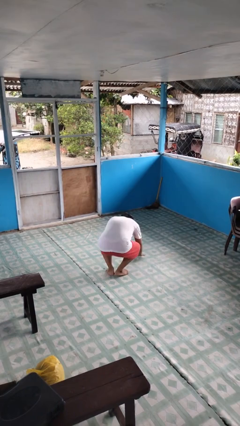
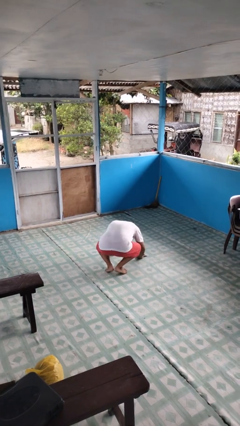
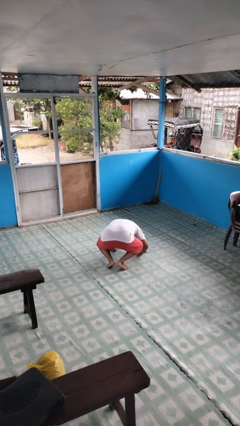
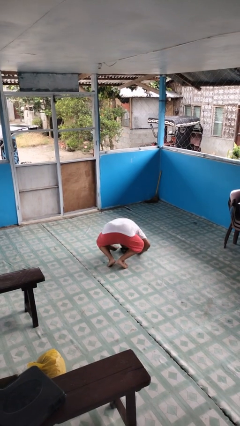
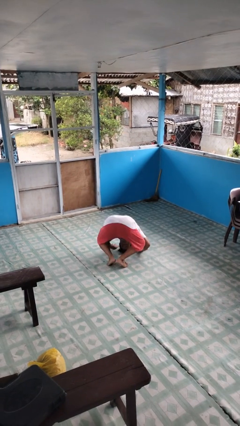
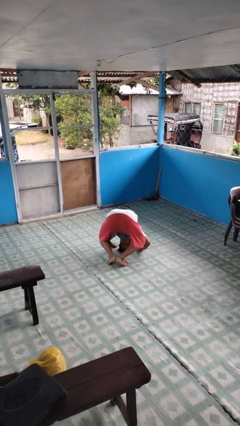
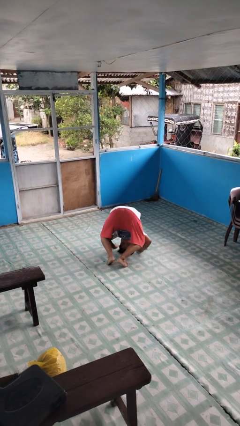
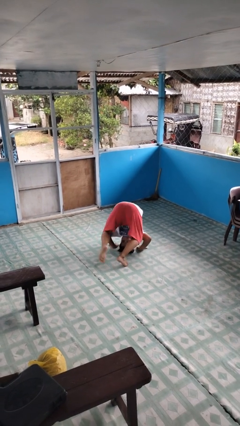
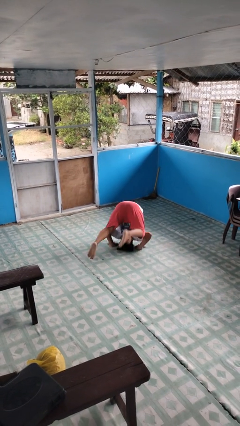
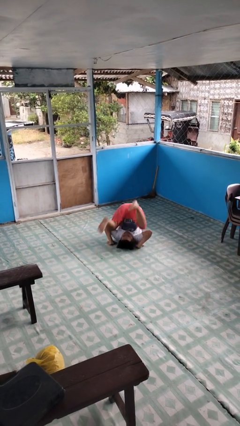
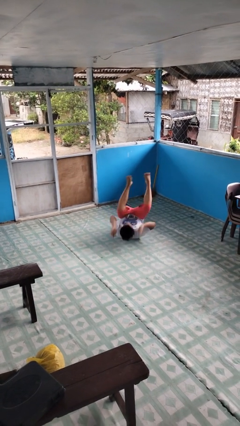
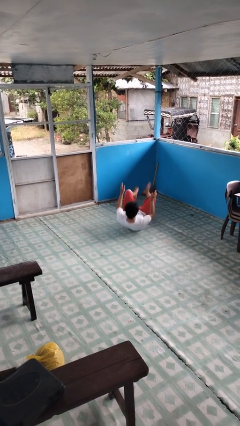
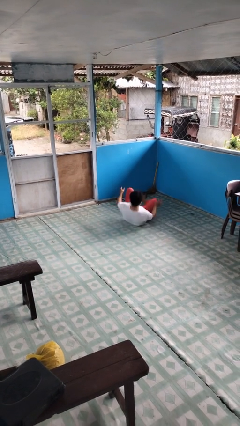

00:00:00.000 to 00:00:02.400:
person somersaults

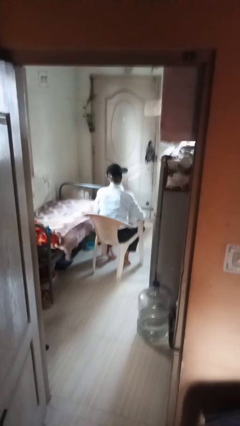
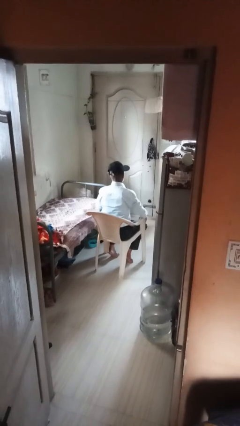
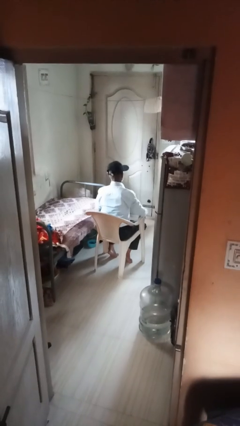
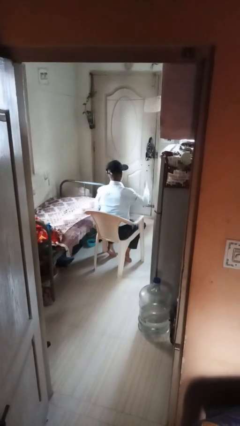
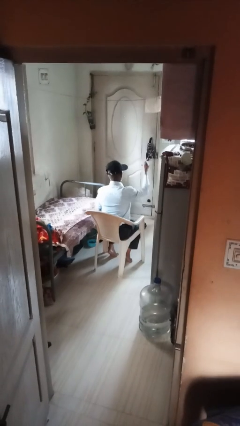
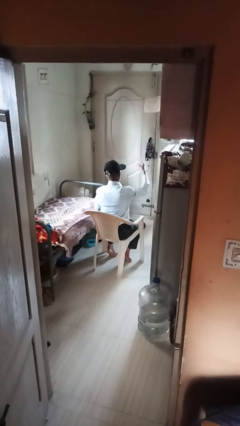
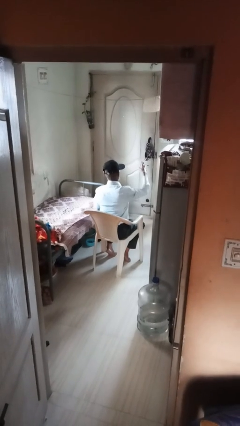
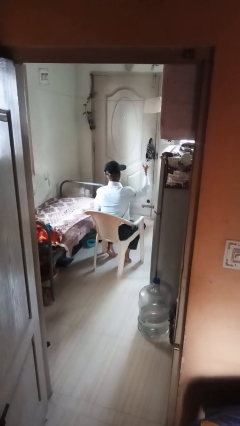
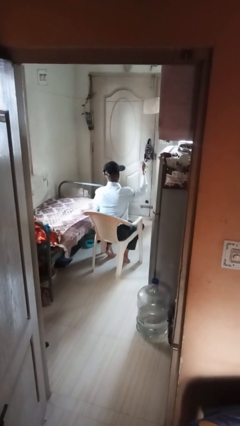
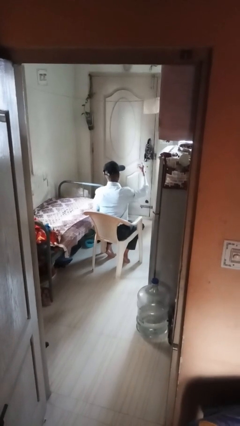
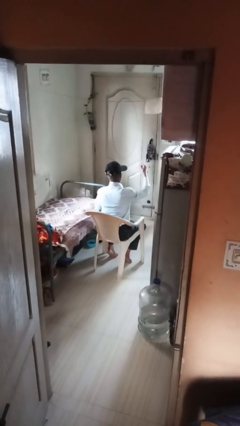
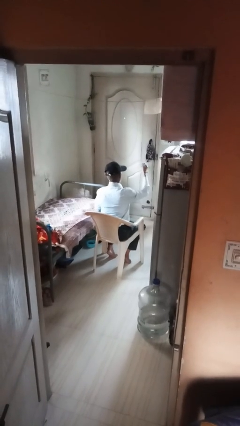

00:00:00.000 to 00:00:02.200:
person snaps fingers

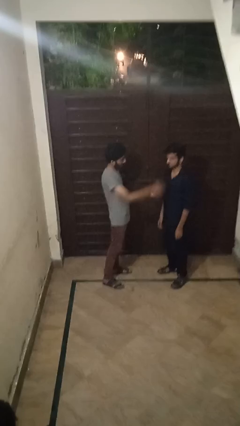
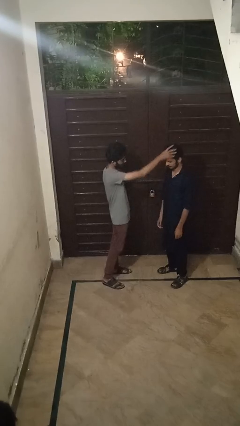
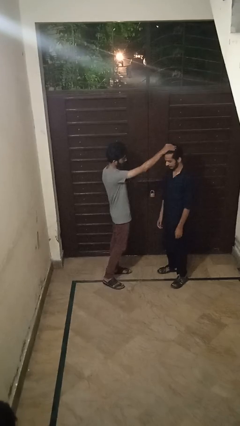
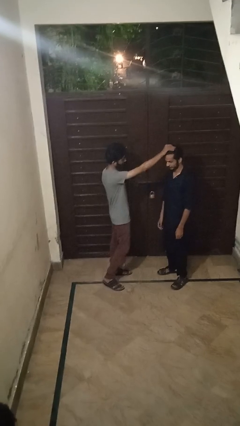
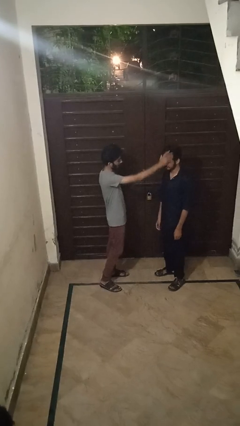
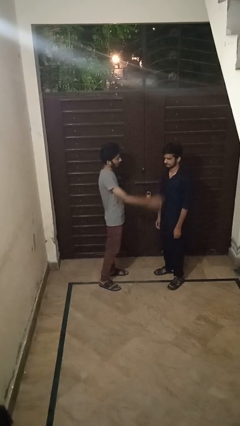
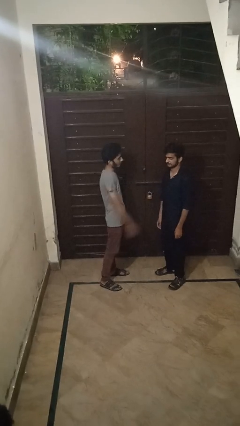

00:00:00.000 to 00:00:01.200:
person grabs person by hair

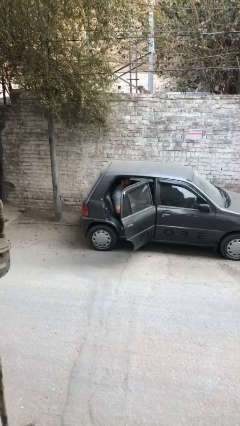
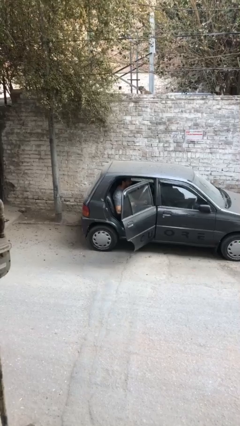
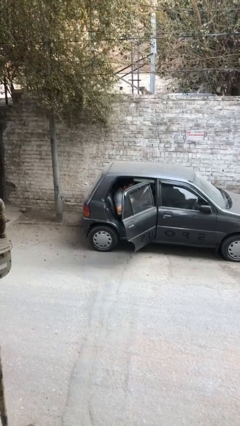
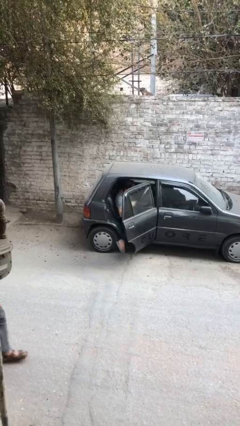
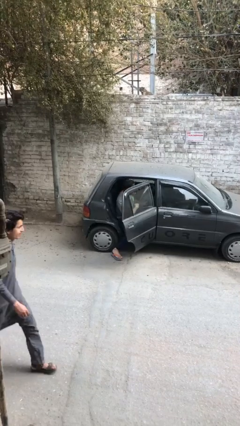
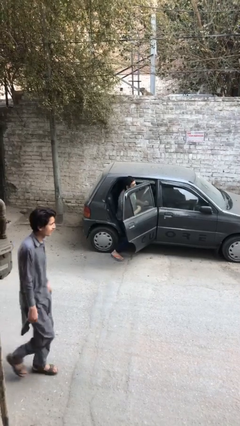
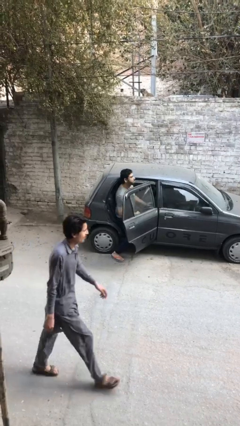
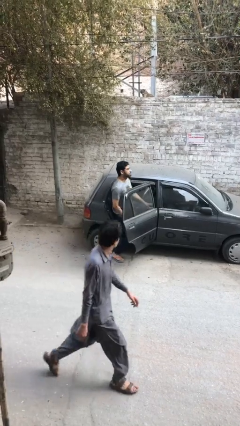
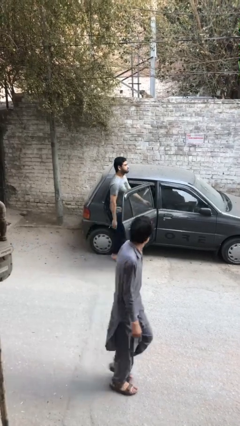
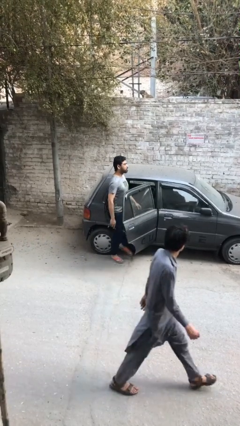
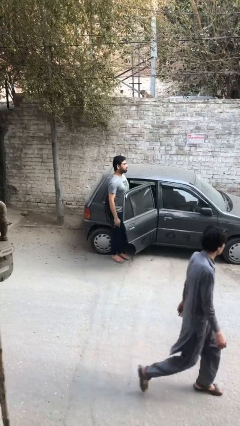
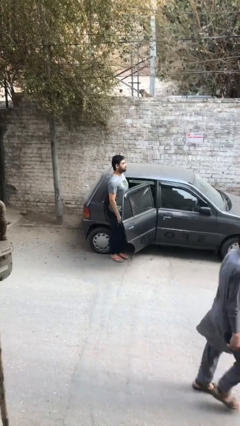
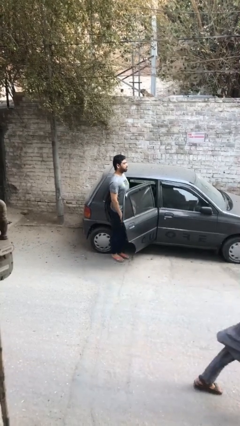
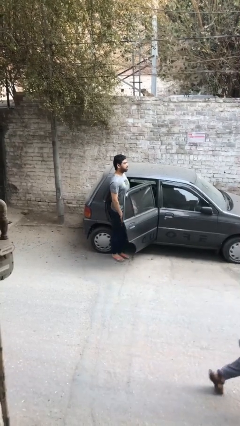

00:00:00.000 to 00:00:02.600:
person exits car

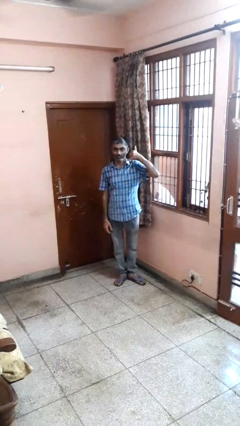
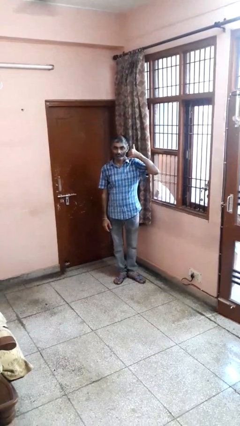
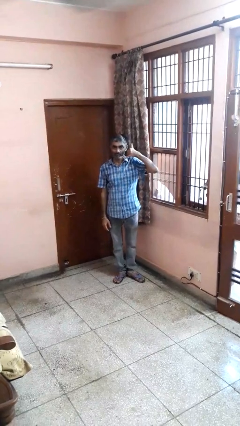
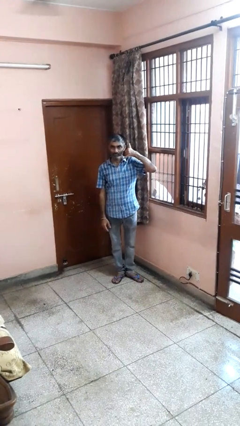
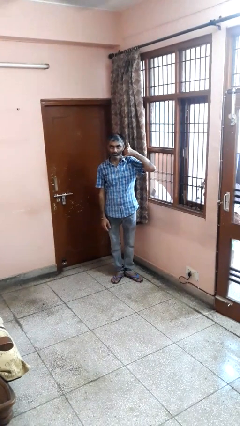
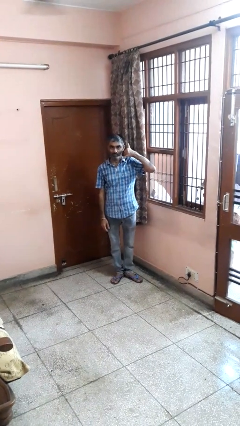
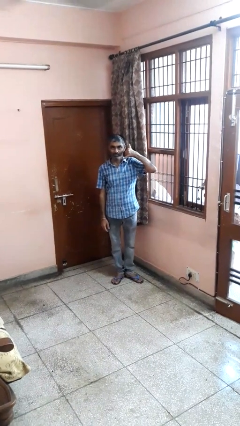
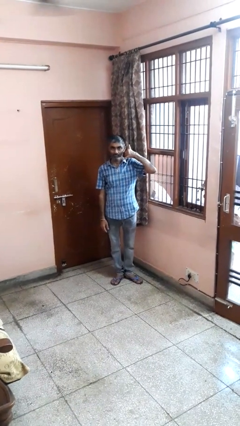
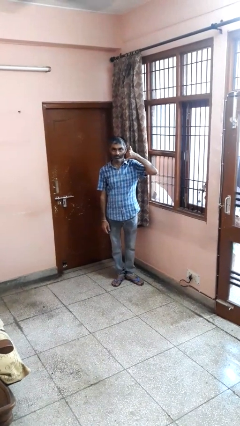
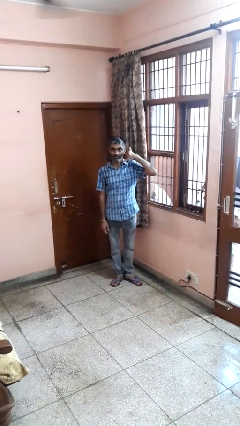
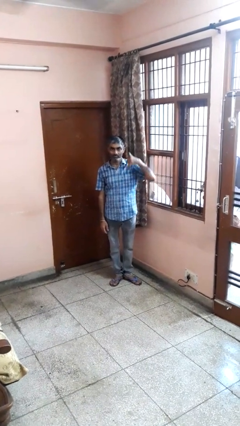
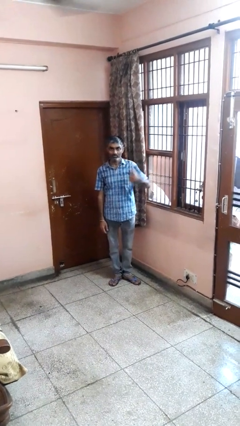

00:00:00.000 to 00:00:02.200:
person gestures call me

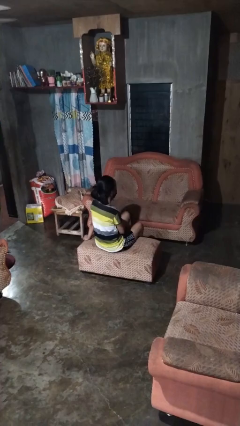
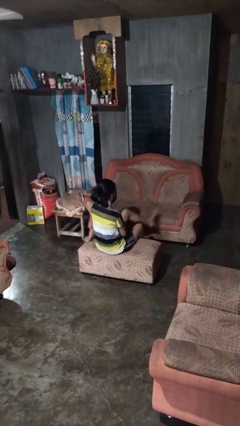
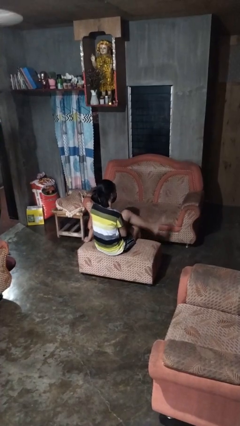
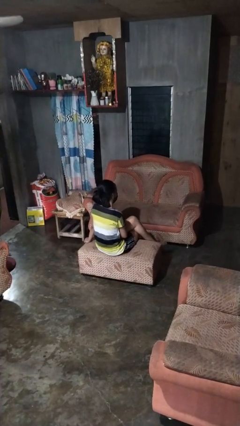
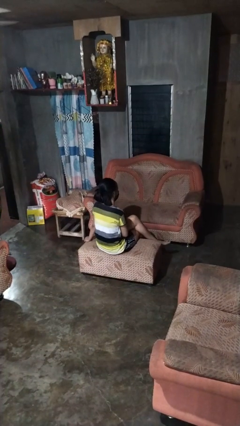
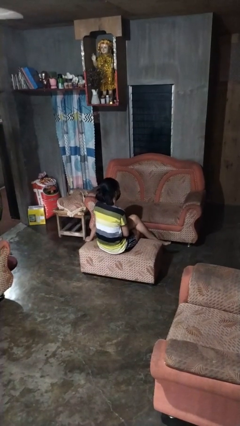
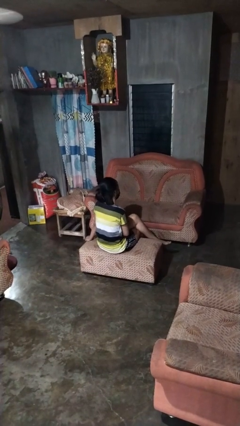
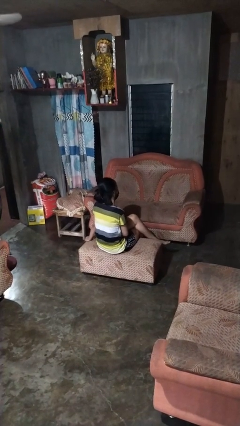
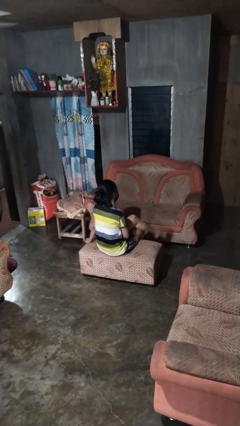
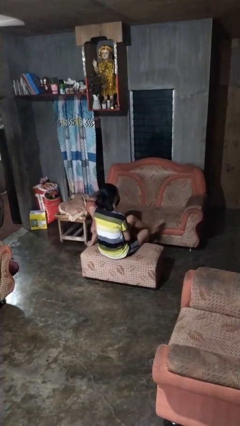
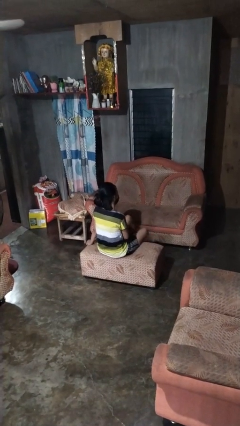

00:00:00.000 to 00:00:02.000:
person crosses legs

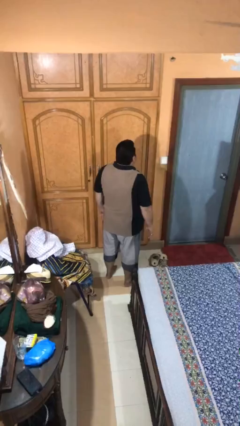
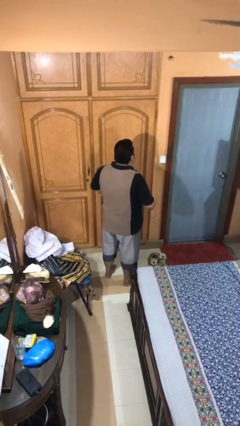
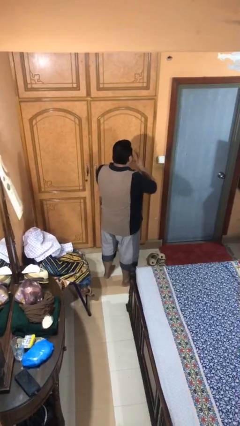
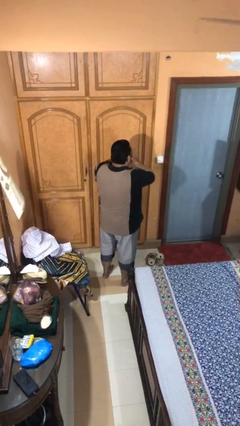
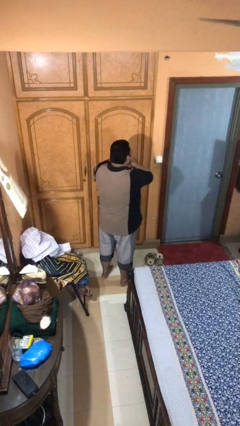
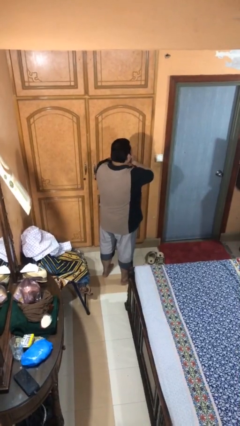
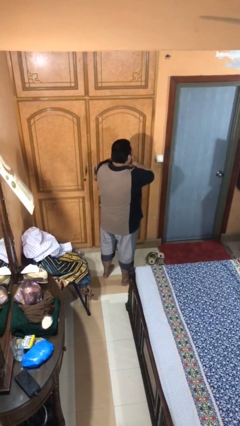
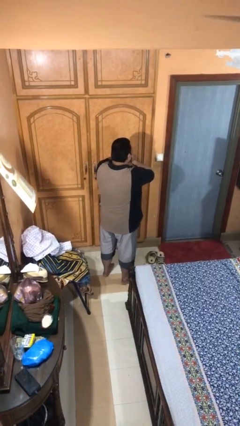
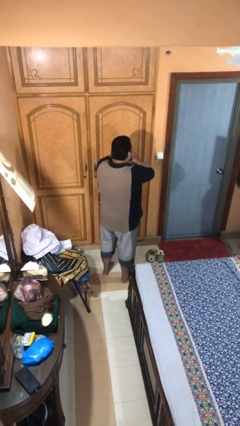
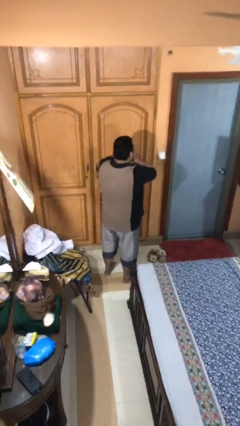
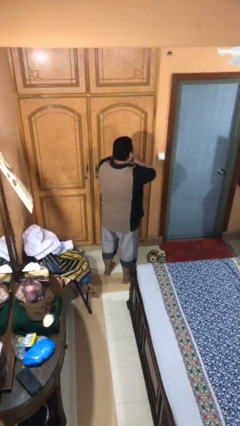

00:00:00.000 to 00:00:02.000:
person covers face with hands

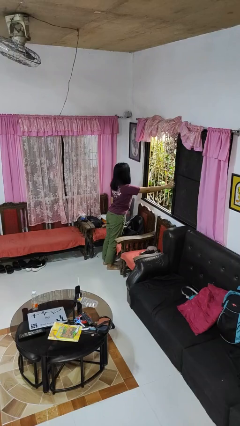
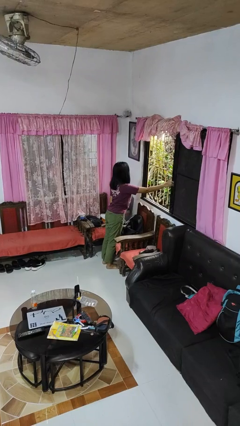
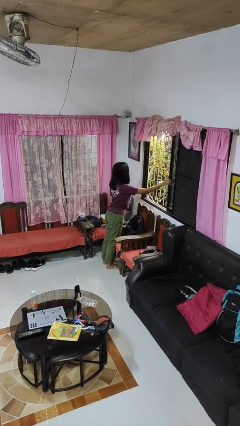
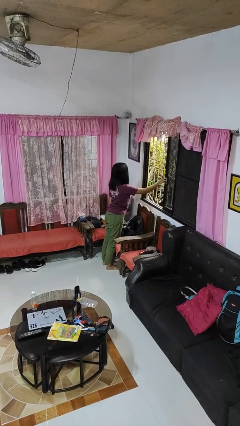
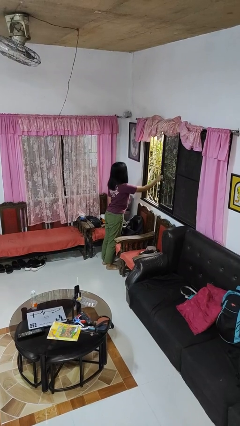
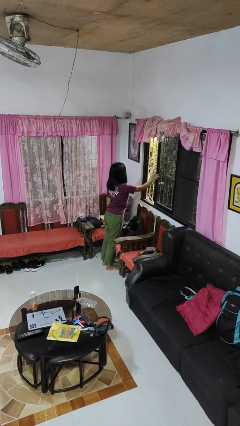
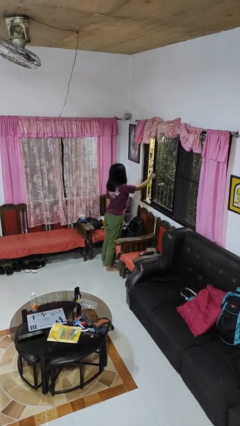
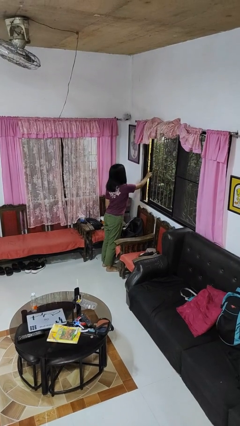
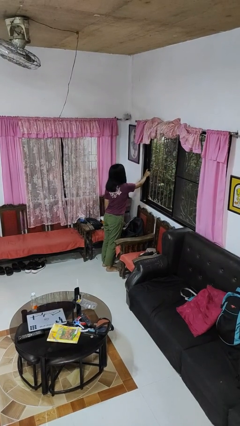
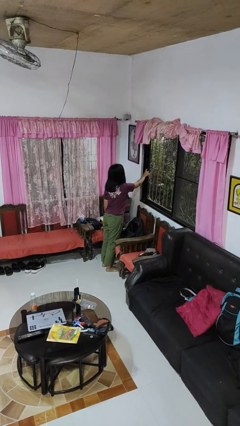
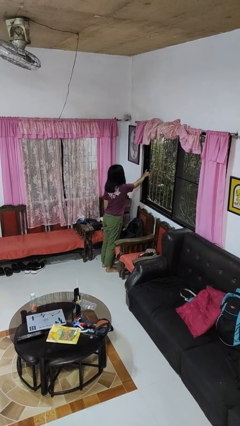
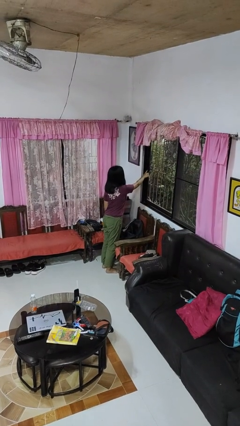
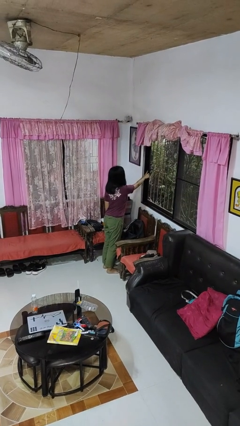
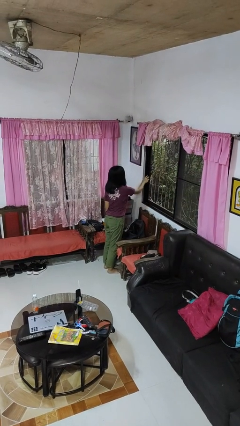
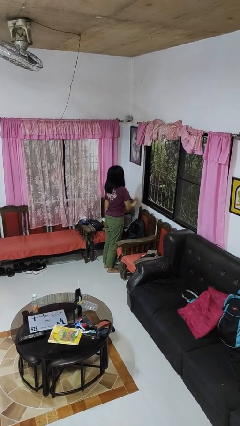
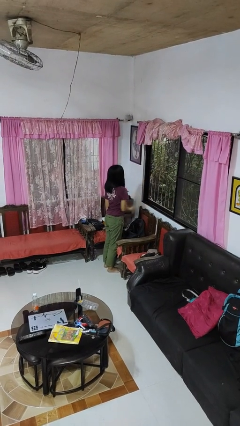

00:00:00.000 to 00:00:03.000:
person closes home window
